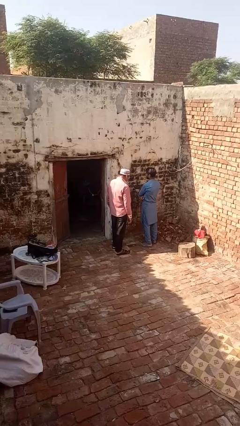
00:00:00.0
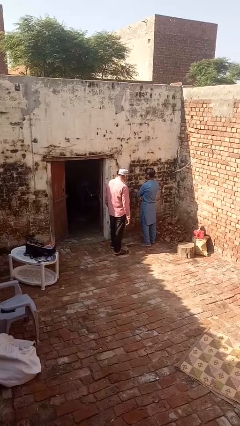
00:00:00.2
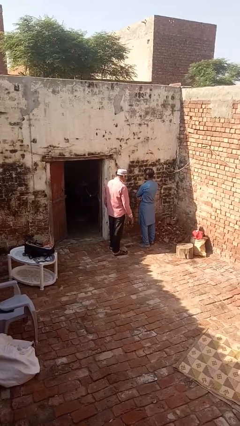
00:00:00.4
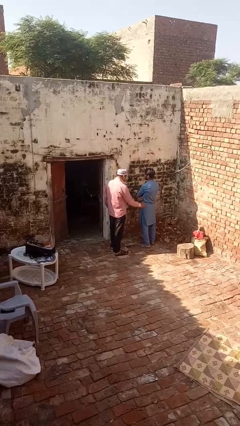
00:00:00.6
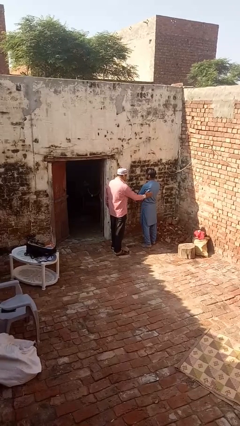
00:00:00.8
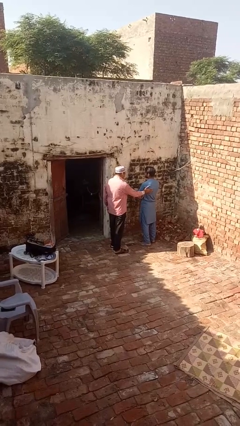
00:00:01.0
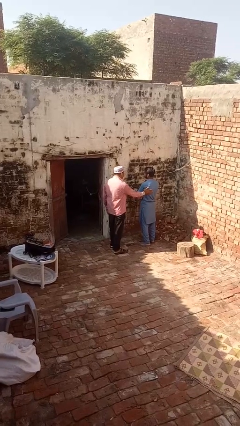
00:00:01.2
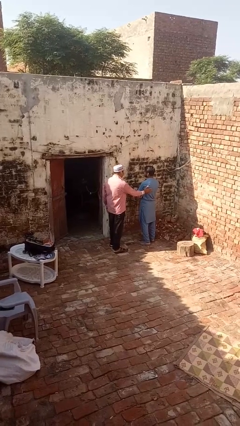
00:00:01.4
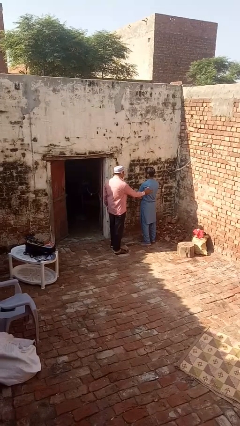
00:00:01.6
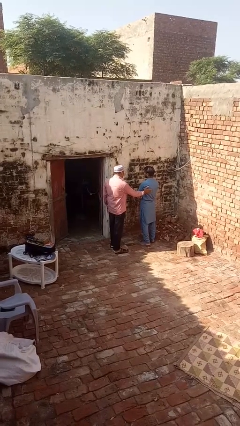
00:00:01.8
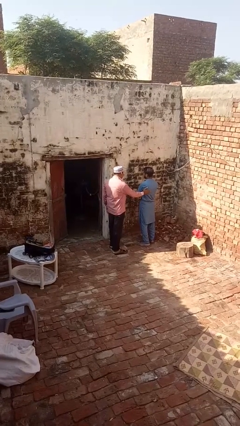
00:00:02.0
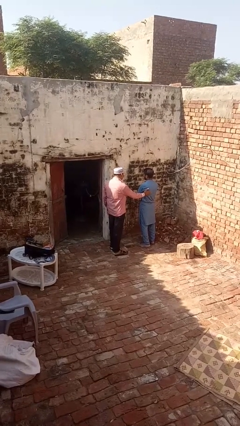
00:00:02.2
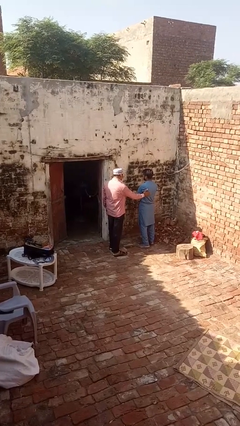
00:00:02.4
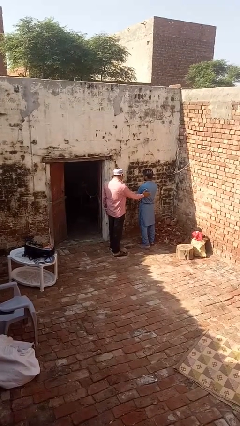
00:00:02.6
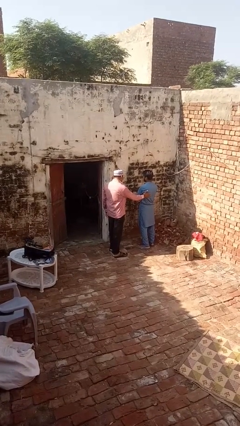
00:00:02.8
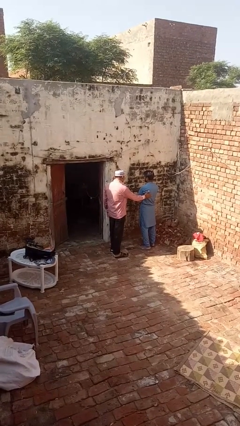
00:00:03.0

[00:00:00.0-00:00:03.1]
person shoves person

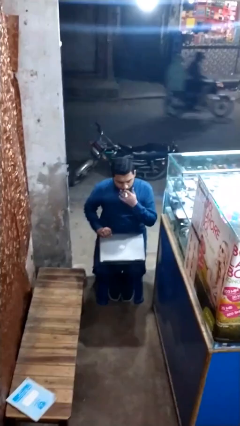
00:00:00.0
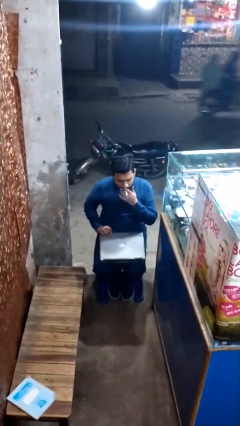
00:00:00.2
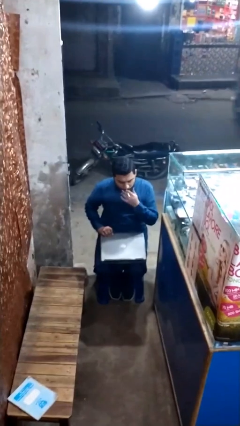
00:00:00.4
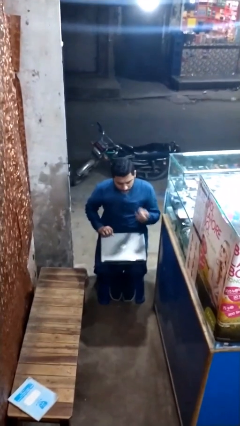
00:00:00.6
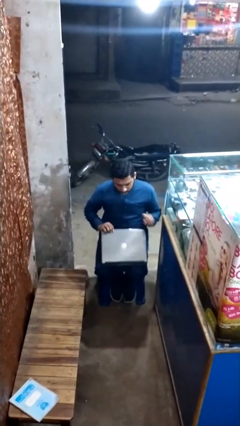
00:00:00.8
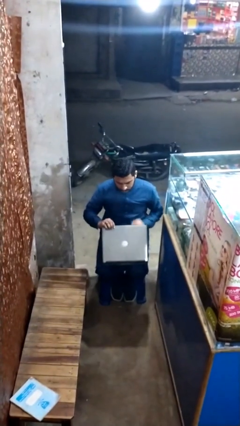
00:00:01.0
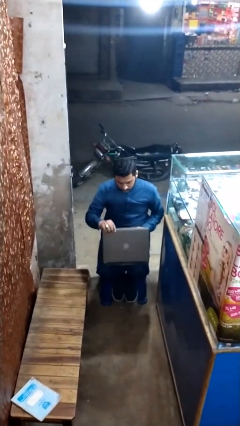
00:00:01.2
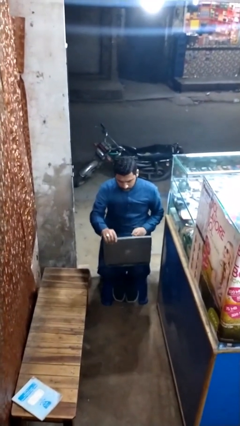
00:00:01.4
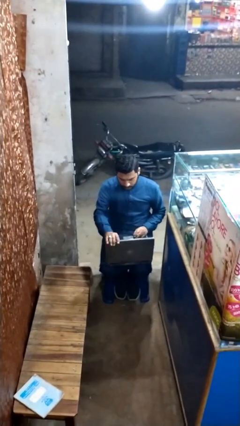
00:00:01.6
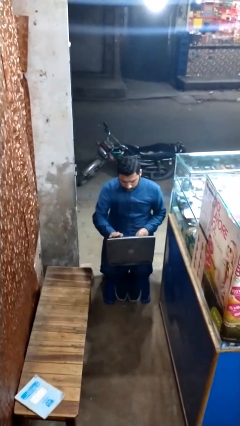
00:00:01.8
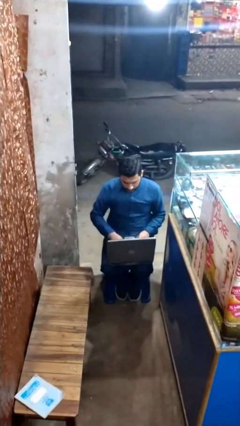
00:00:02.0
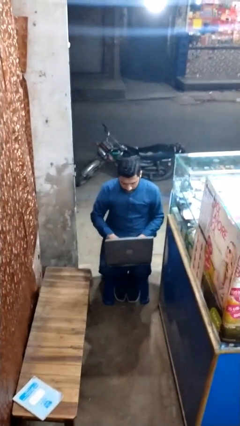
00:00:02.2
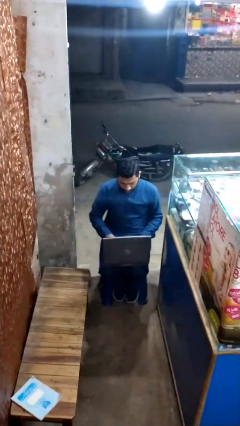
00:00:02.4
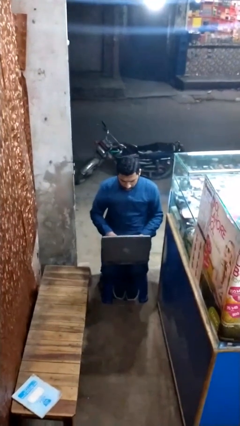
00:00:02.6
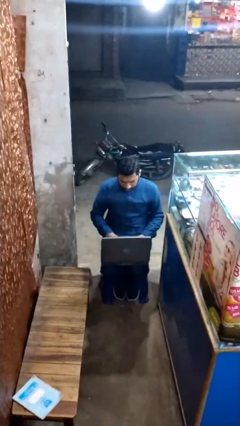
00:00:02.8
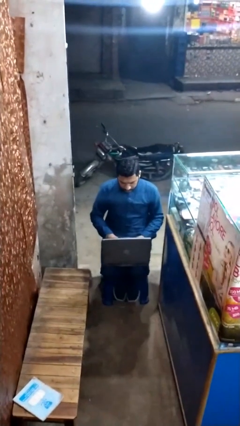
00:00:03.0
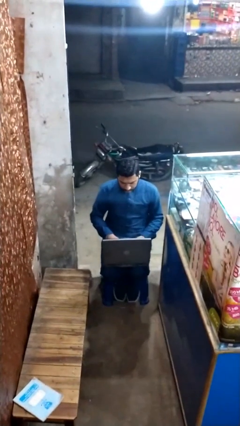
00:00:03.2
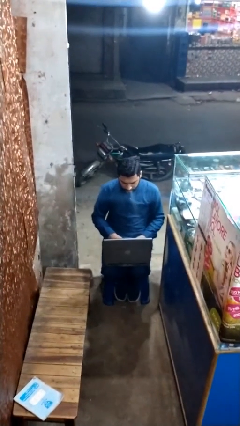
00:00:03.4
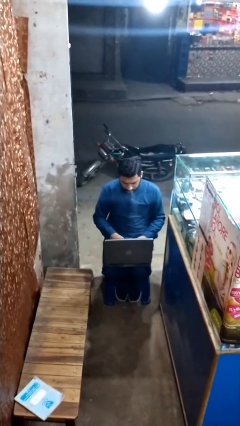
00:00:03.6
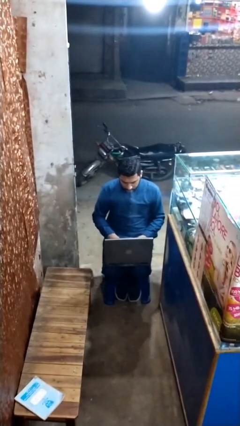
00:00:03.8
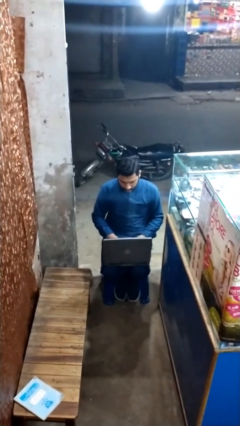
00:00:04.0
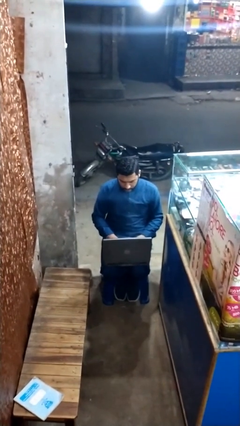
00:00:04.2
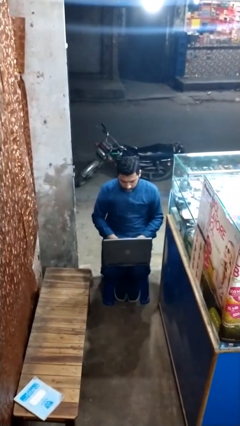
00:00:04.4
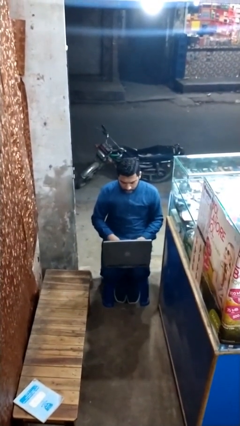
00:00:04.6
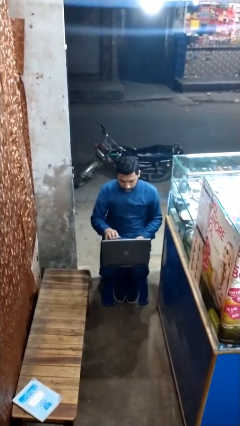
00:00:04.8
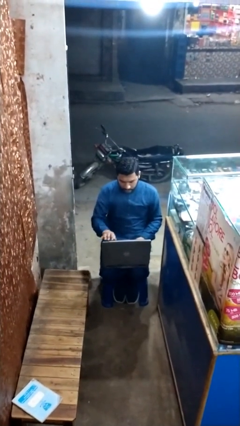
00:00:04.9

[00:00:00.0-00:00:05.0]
person interacts with laptop

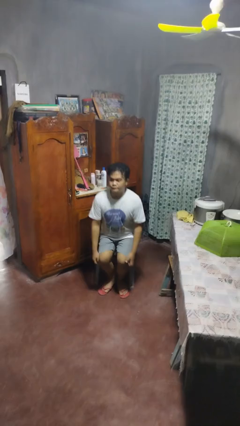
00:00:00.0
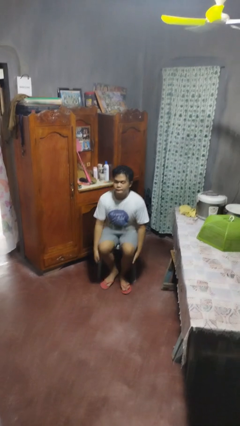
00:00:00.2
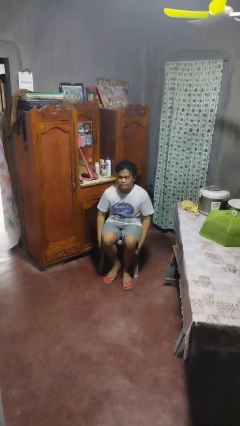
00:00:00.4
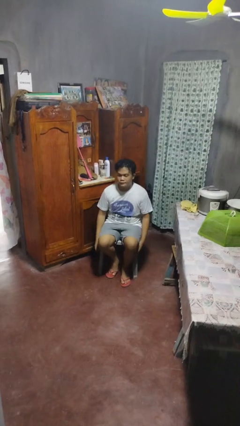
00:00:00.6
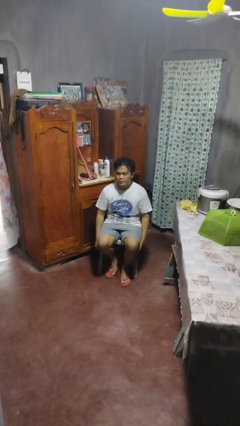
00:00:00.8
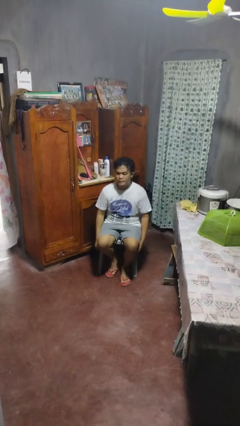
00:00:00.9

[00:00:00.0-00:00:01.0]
person sits down

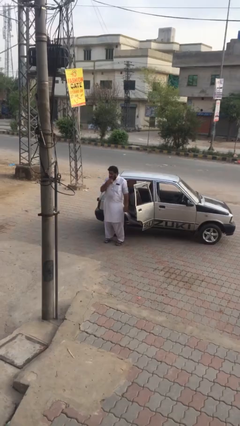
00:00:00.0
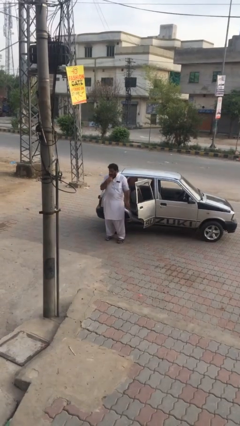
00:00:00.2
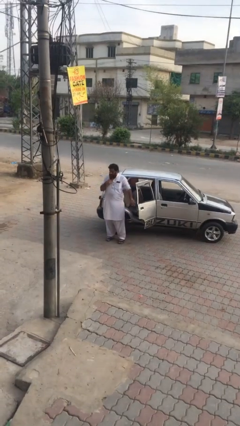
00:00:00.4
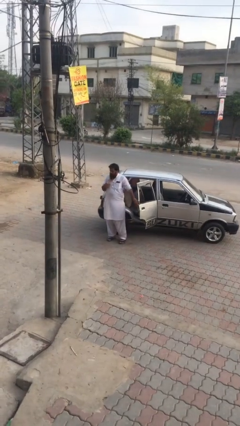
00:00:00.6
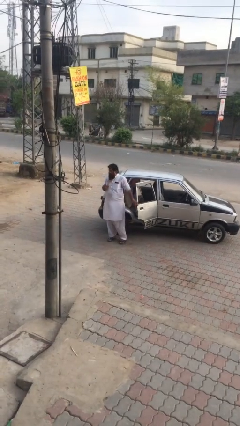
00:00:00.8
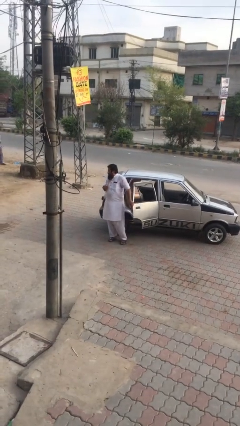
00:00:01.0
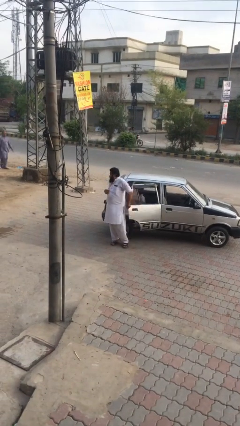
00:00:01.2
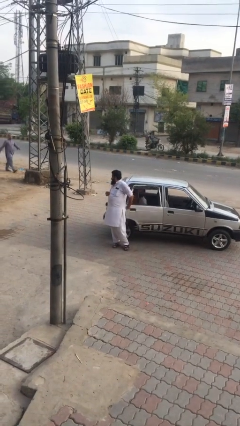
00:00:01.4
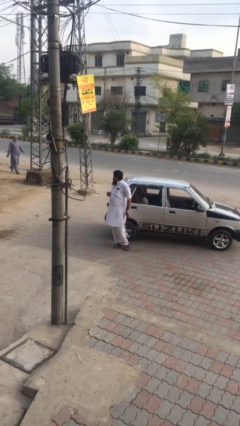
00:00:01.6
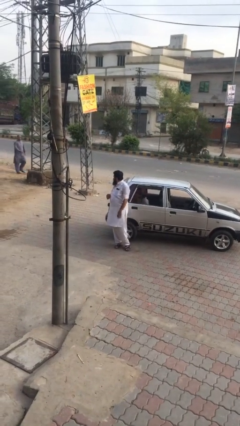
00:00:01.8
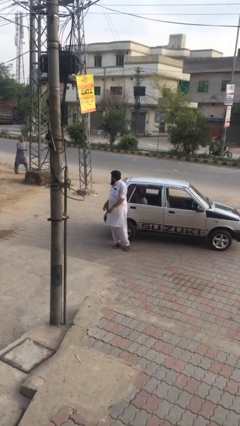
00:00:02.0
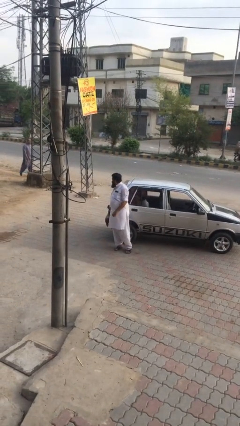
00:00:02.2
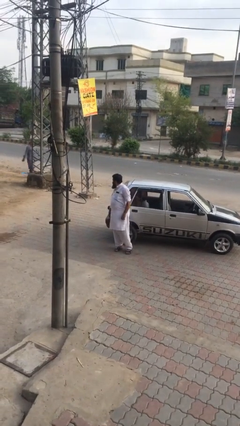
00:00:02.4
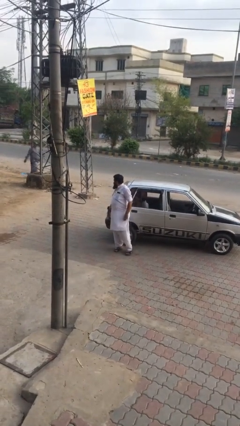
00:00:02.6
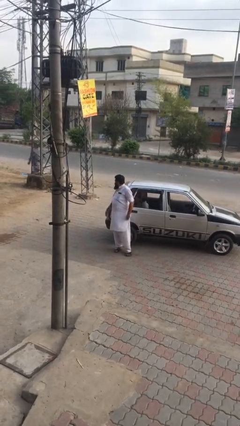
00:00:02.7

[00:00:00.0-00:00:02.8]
person closes car door

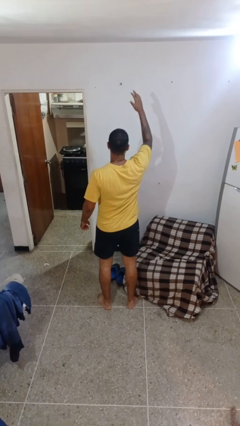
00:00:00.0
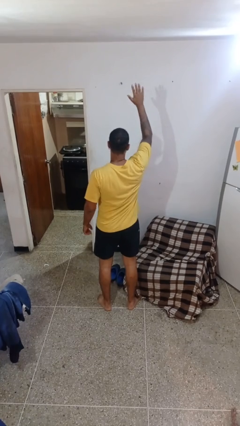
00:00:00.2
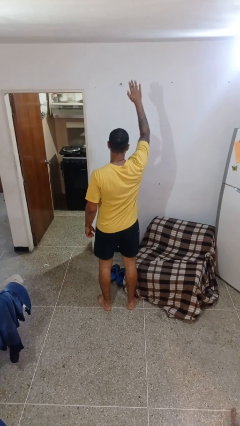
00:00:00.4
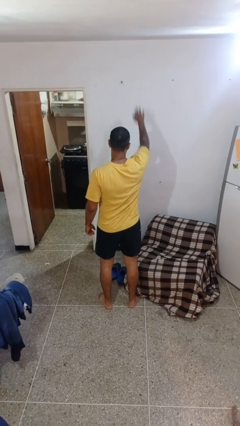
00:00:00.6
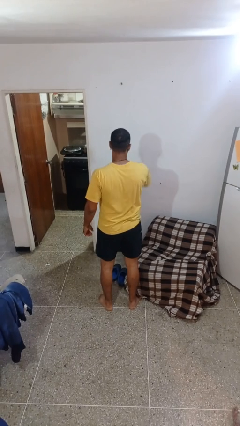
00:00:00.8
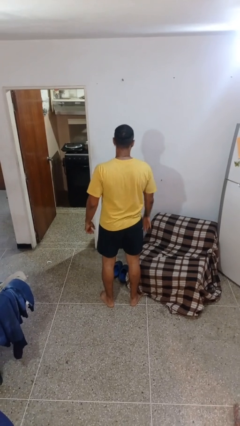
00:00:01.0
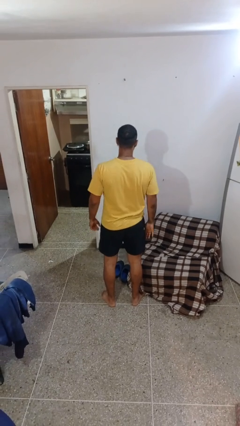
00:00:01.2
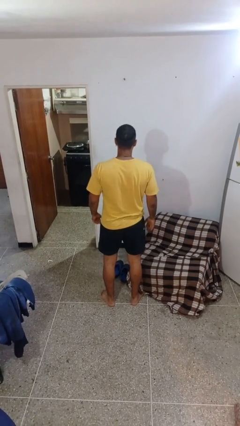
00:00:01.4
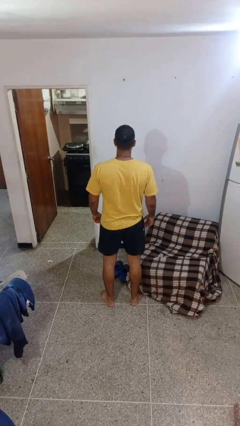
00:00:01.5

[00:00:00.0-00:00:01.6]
person gestures swipe down

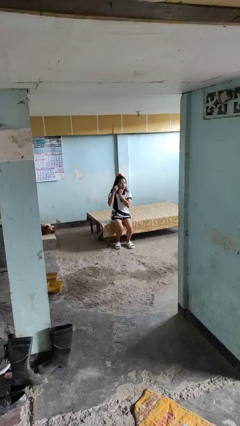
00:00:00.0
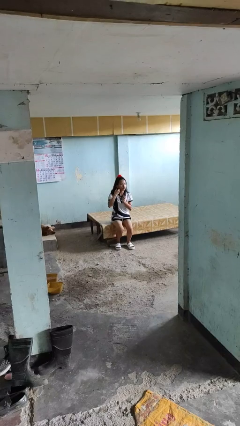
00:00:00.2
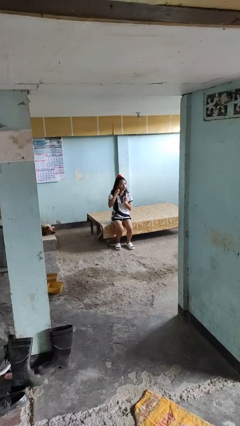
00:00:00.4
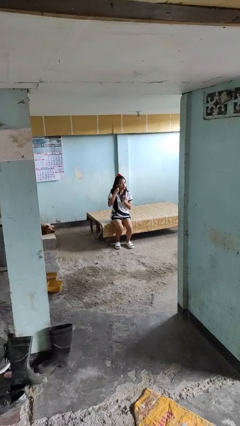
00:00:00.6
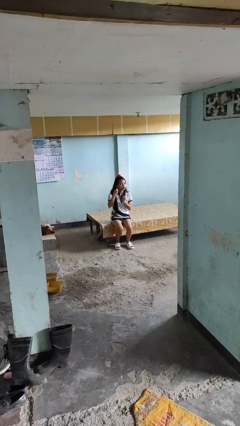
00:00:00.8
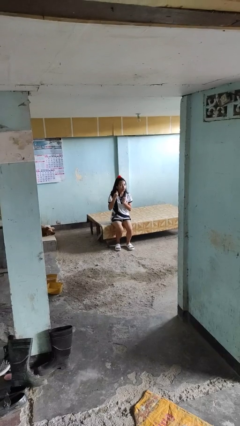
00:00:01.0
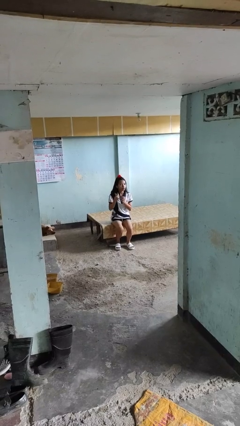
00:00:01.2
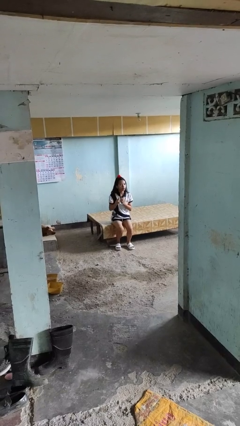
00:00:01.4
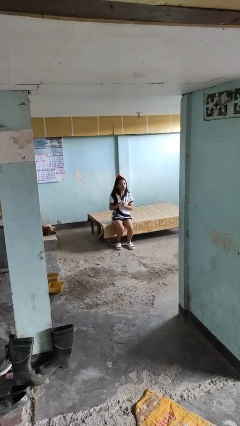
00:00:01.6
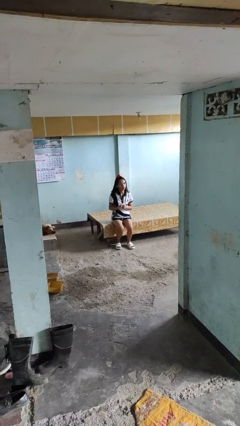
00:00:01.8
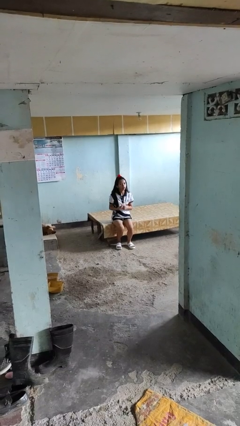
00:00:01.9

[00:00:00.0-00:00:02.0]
person takes off earrings

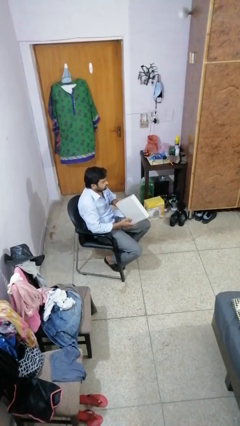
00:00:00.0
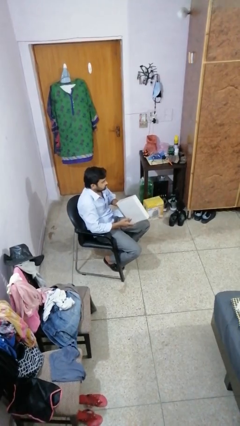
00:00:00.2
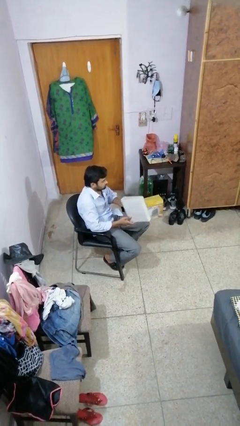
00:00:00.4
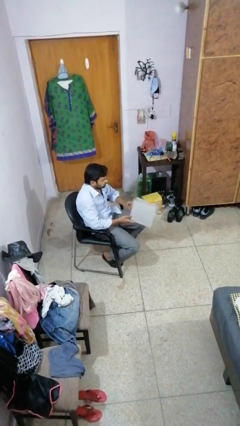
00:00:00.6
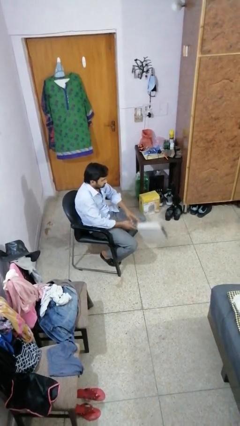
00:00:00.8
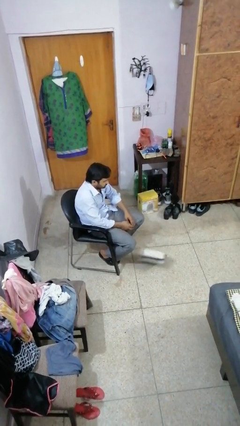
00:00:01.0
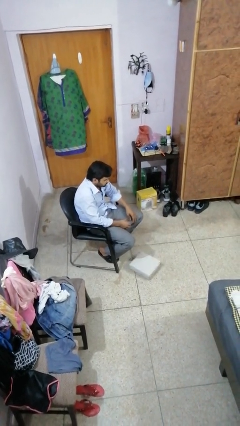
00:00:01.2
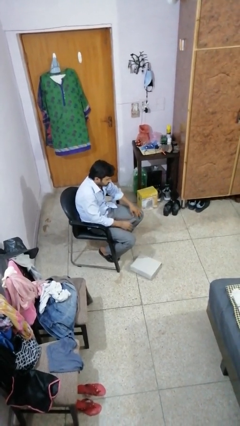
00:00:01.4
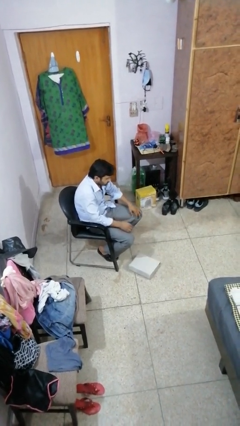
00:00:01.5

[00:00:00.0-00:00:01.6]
person drops object

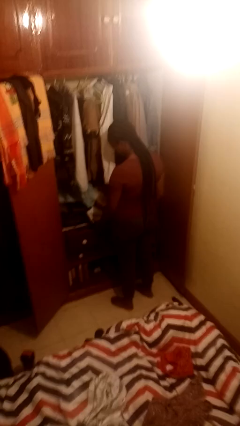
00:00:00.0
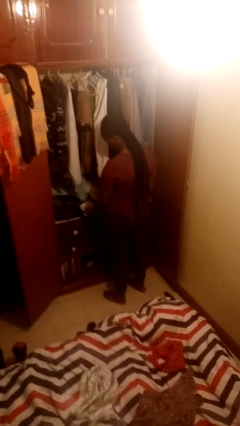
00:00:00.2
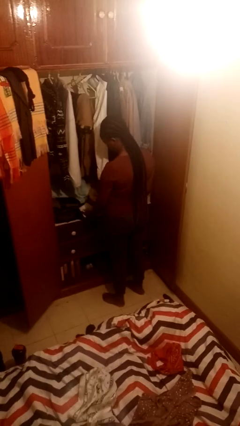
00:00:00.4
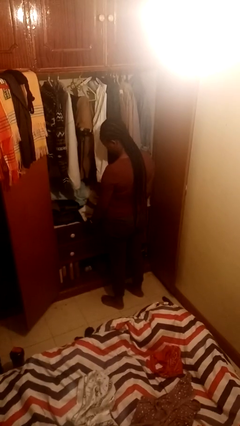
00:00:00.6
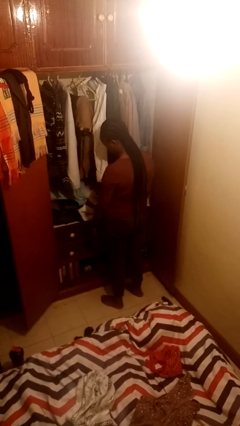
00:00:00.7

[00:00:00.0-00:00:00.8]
person closes dresser drawer
